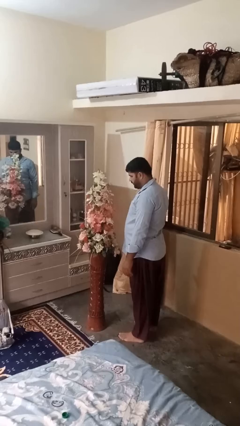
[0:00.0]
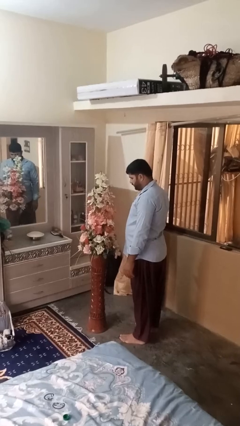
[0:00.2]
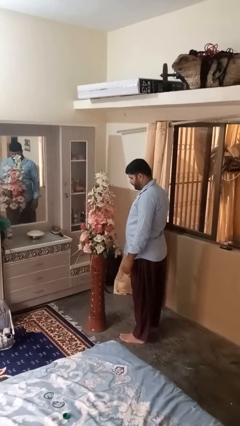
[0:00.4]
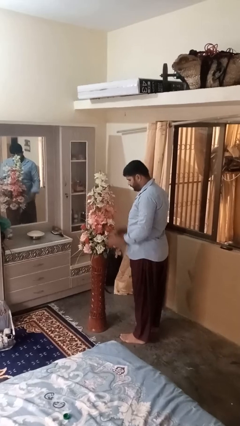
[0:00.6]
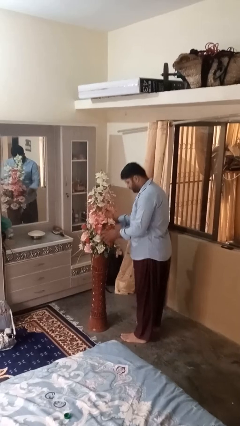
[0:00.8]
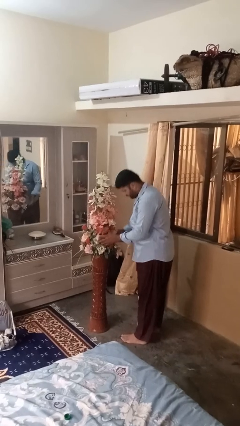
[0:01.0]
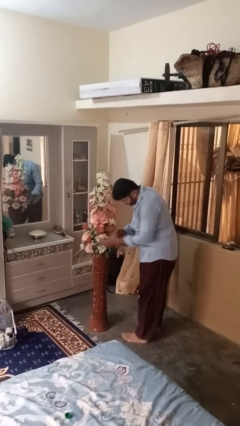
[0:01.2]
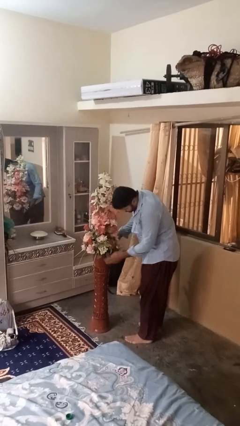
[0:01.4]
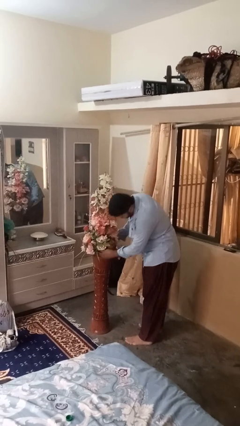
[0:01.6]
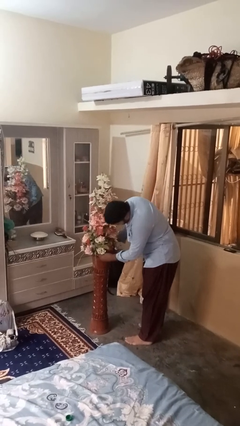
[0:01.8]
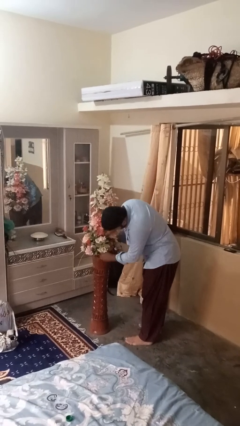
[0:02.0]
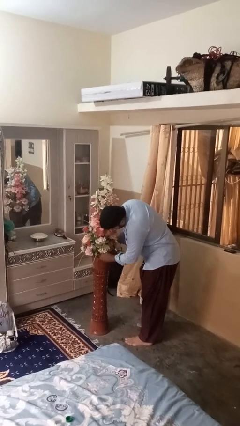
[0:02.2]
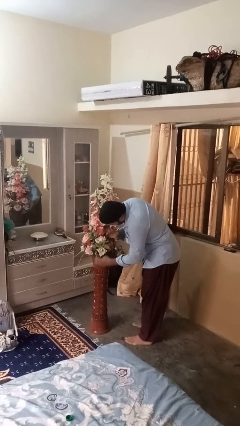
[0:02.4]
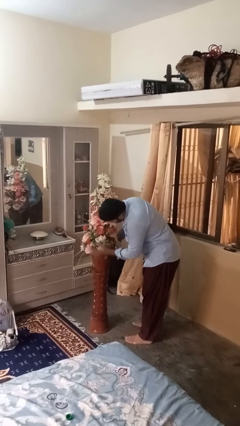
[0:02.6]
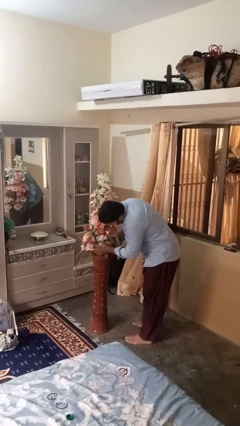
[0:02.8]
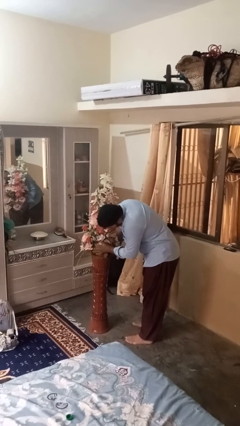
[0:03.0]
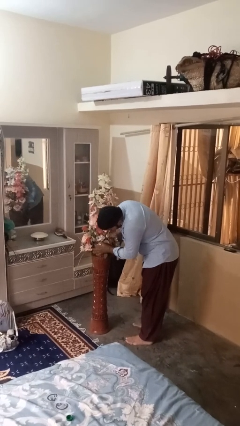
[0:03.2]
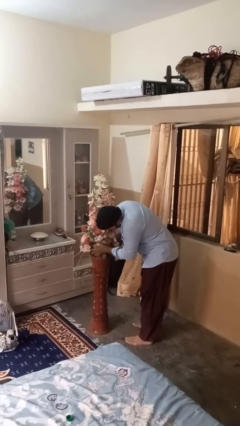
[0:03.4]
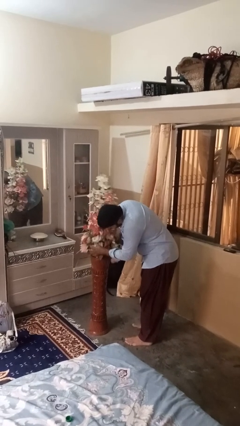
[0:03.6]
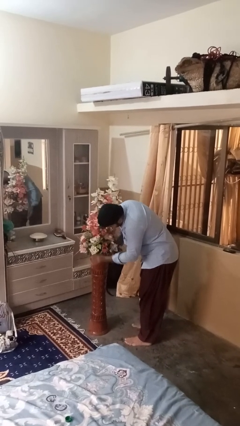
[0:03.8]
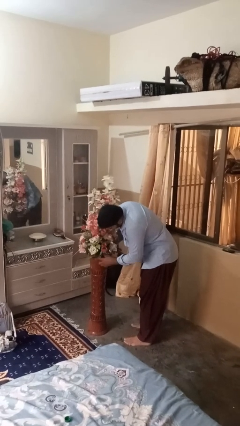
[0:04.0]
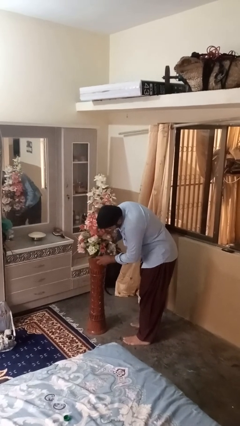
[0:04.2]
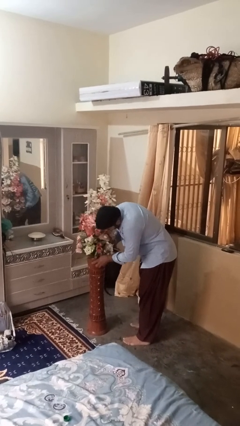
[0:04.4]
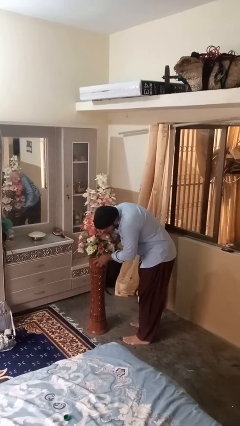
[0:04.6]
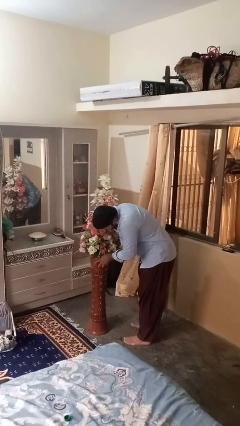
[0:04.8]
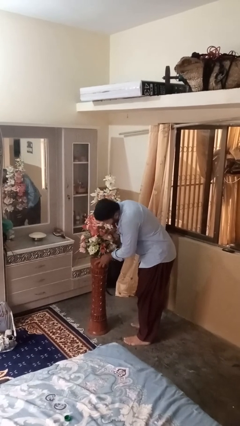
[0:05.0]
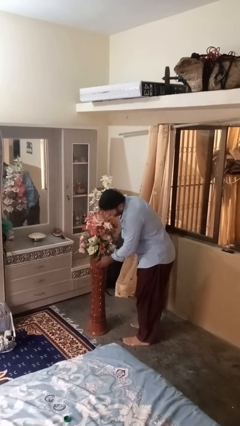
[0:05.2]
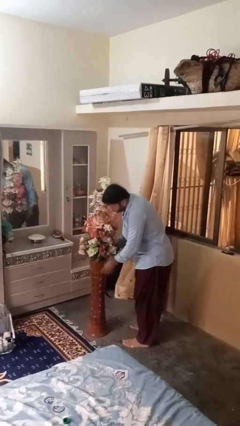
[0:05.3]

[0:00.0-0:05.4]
person arranges flowers in vase

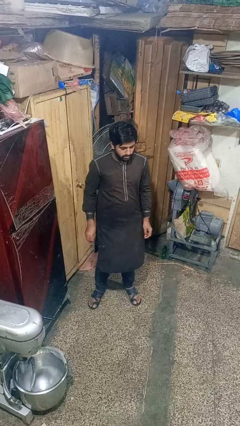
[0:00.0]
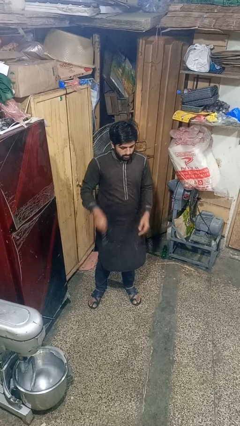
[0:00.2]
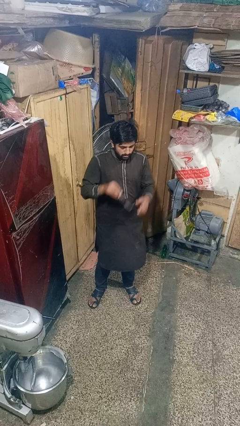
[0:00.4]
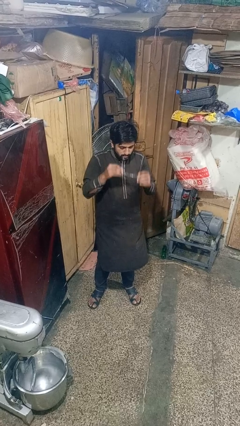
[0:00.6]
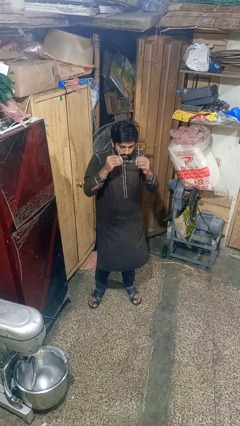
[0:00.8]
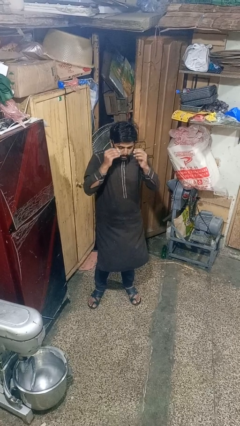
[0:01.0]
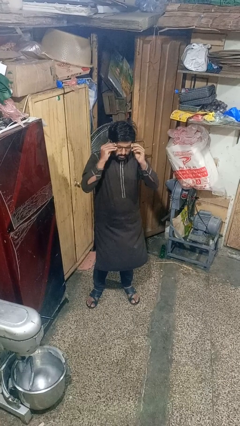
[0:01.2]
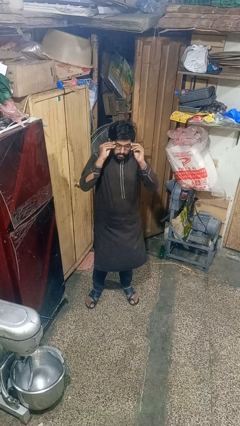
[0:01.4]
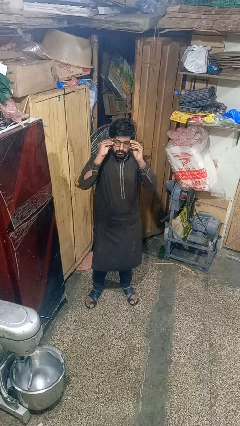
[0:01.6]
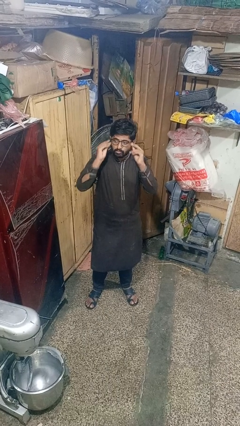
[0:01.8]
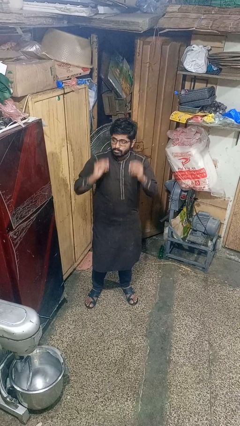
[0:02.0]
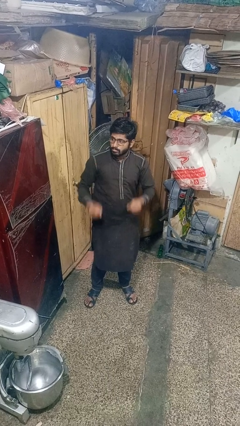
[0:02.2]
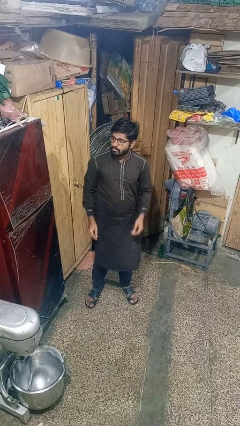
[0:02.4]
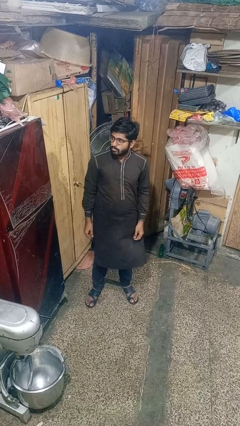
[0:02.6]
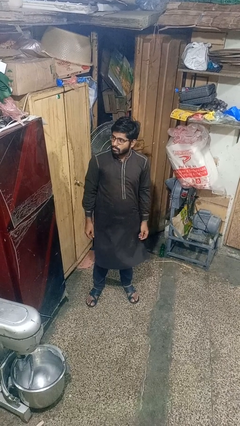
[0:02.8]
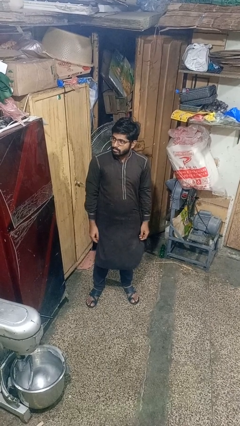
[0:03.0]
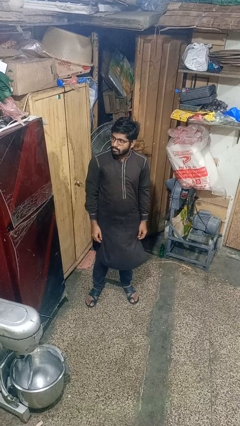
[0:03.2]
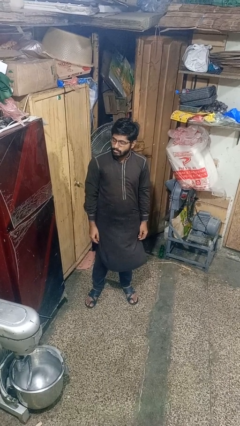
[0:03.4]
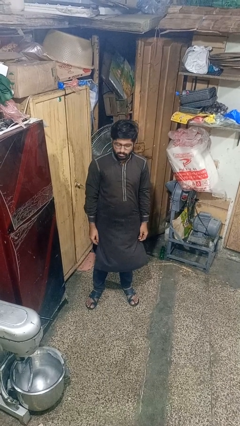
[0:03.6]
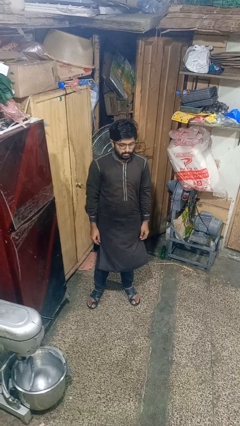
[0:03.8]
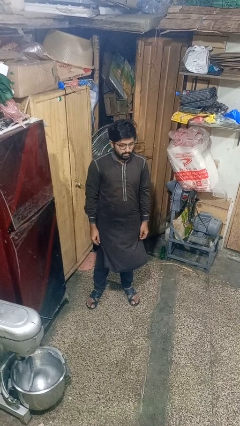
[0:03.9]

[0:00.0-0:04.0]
person puts on glasses

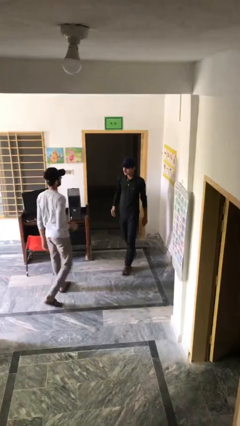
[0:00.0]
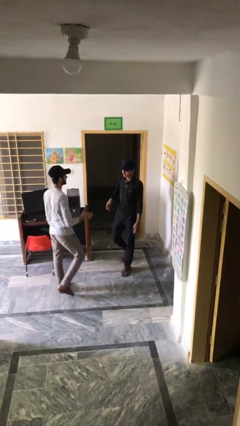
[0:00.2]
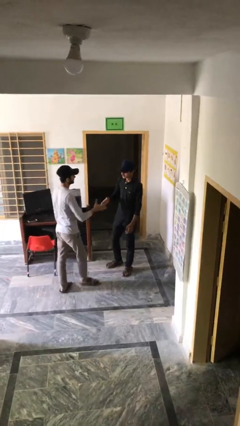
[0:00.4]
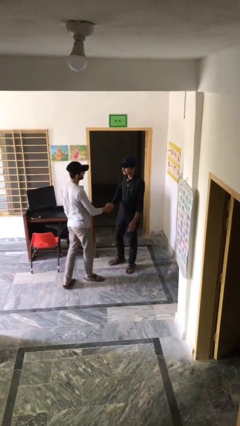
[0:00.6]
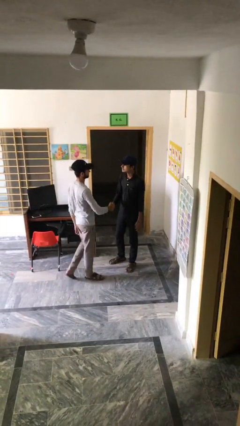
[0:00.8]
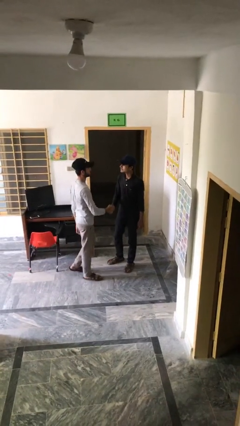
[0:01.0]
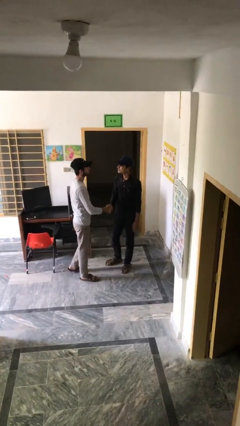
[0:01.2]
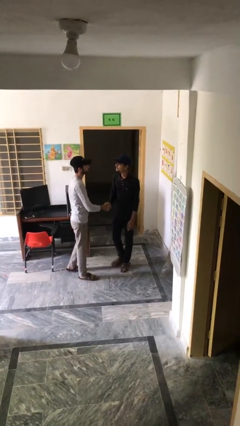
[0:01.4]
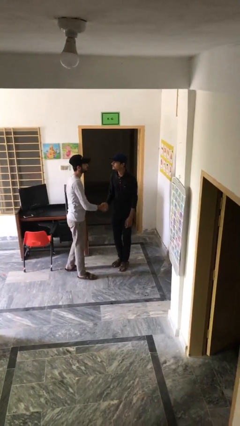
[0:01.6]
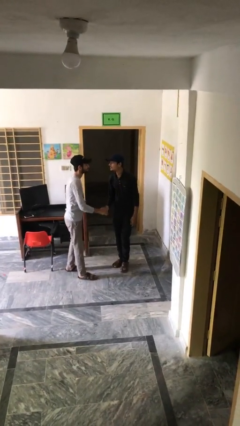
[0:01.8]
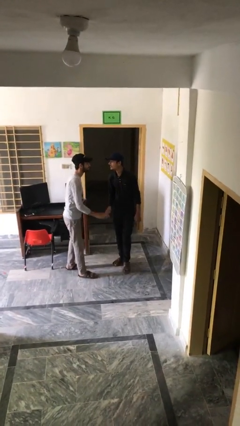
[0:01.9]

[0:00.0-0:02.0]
person shakes hand

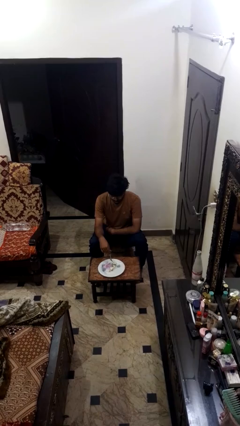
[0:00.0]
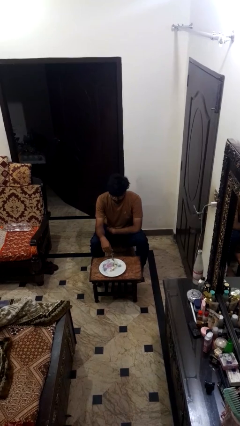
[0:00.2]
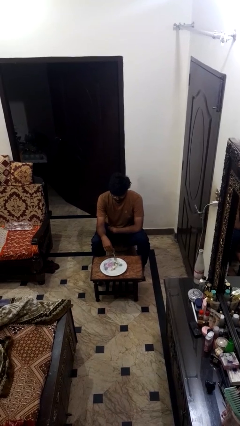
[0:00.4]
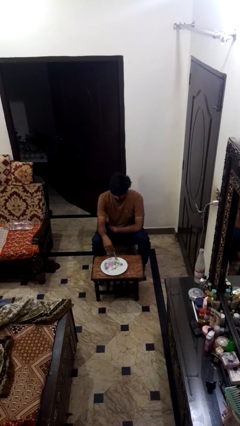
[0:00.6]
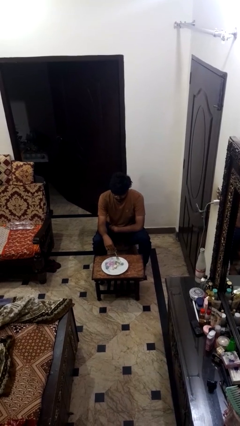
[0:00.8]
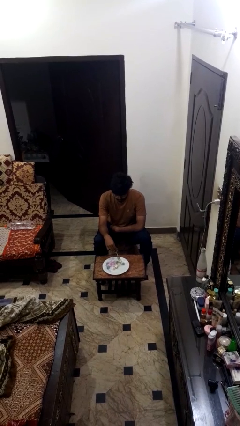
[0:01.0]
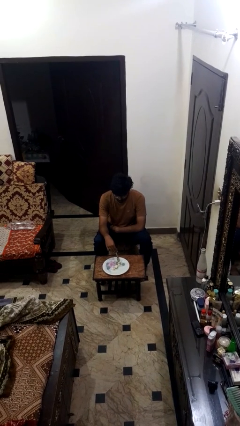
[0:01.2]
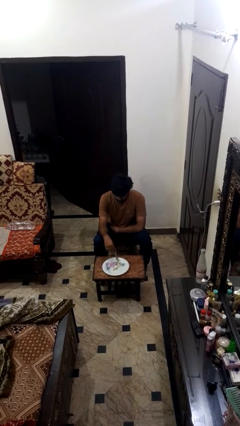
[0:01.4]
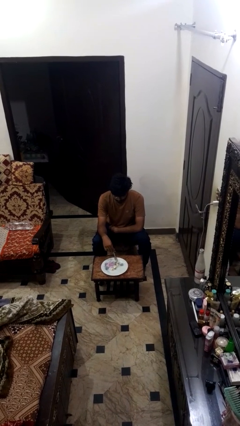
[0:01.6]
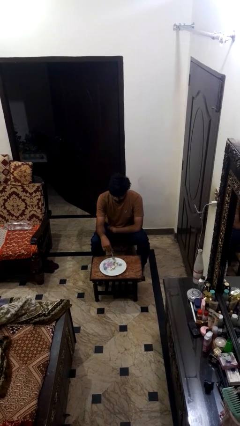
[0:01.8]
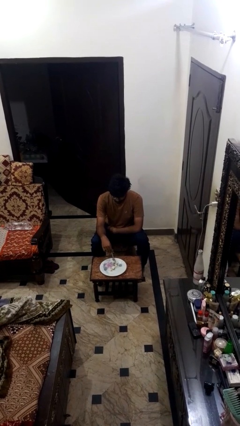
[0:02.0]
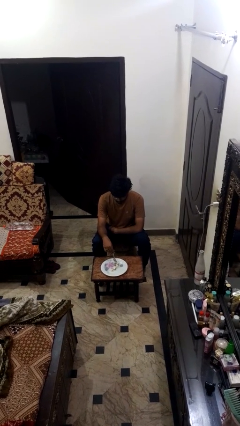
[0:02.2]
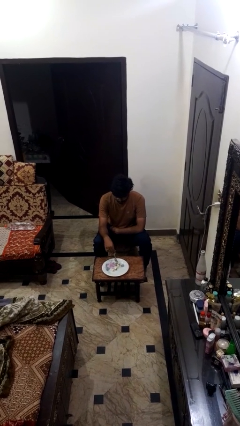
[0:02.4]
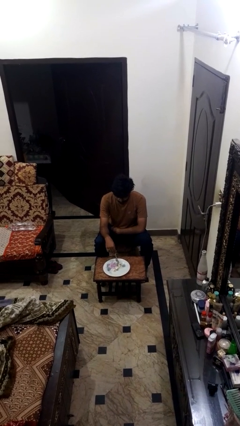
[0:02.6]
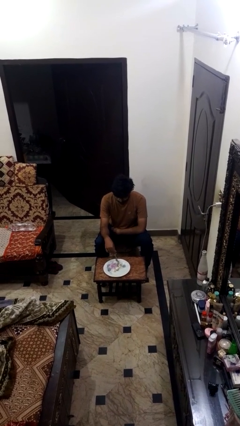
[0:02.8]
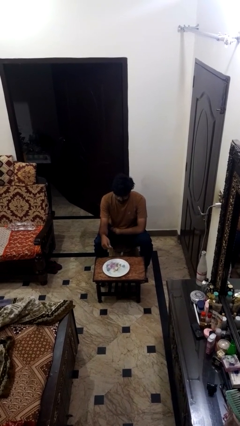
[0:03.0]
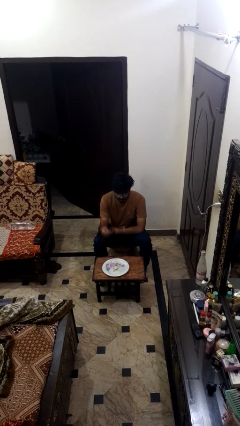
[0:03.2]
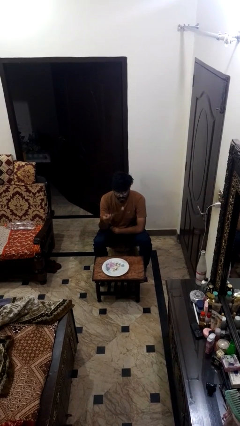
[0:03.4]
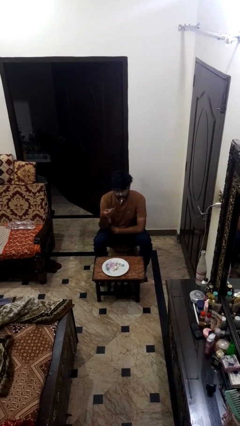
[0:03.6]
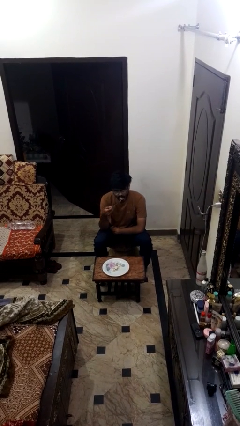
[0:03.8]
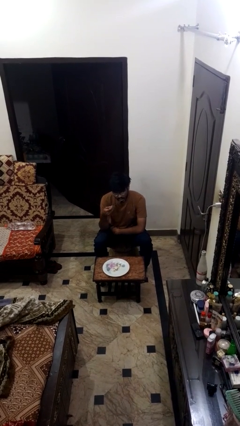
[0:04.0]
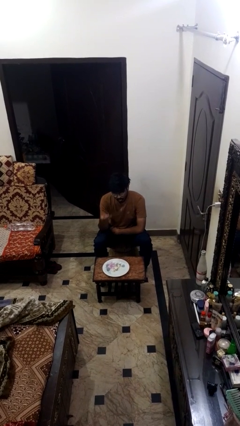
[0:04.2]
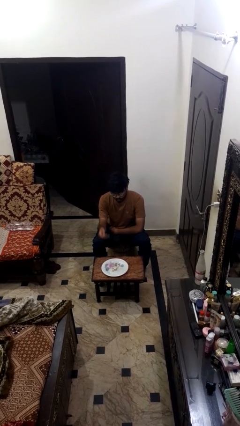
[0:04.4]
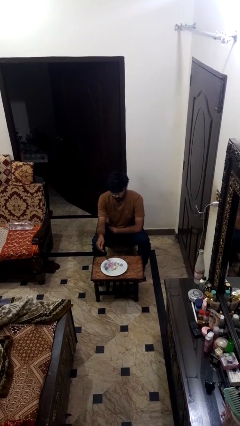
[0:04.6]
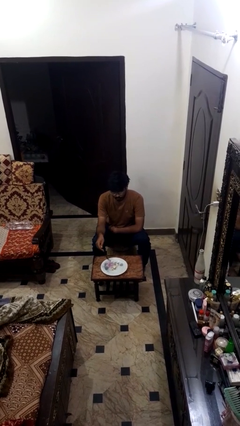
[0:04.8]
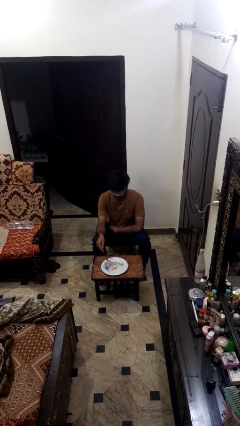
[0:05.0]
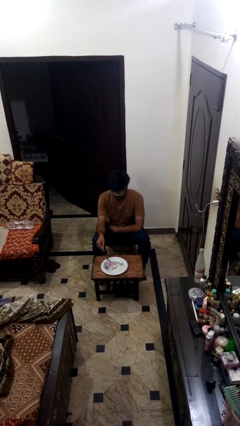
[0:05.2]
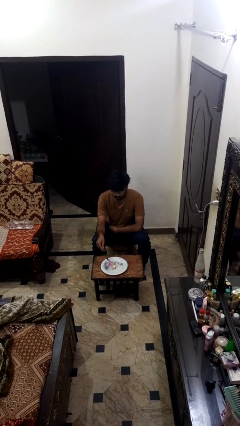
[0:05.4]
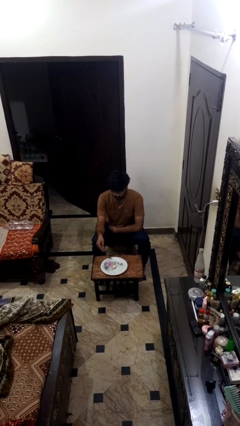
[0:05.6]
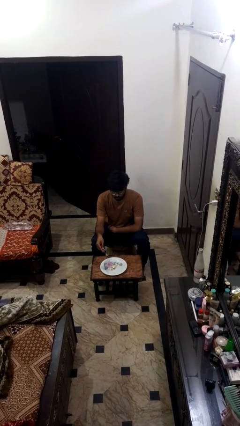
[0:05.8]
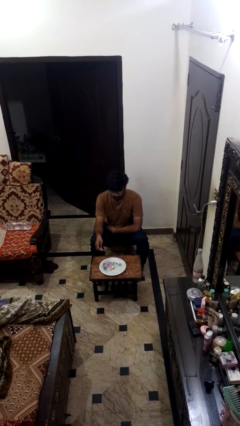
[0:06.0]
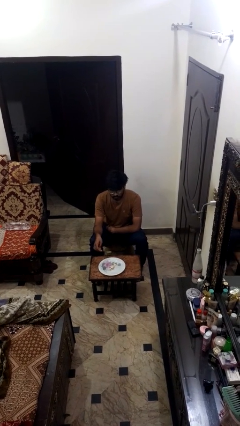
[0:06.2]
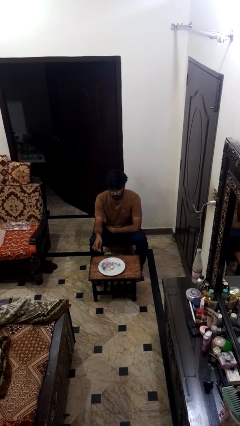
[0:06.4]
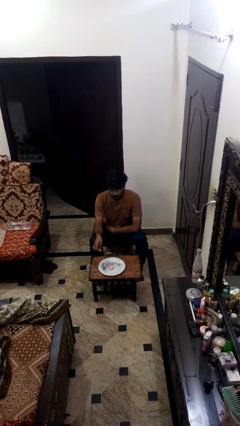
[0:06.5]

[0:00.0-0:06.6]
person eats with utensil
